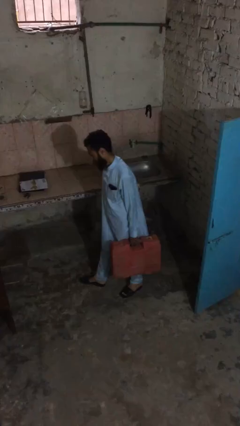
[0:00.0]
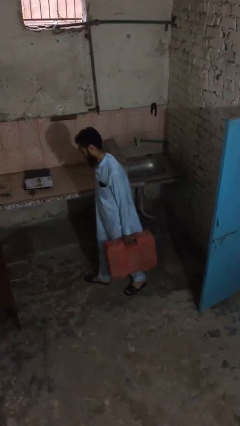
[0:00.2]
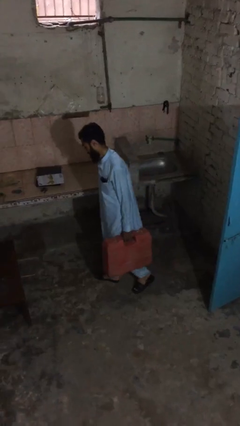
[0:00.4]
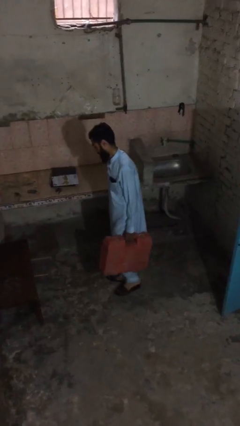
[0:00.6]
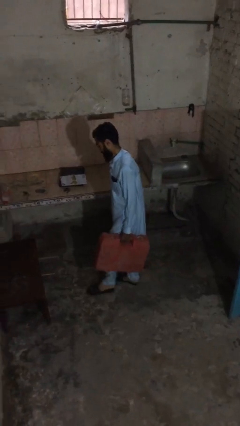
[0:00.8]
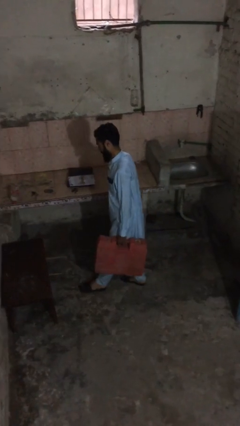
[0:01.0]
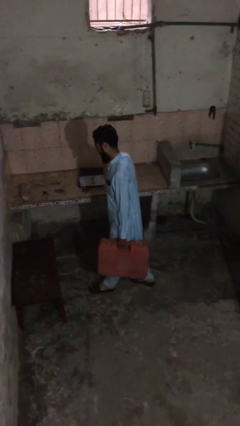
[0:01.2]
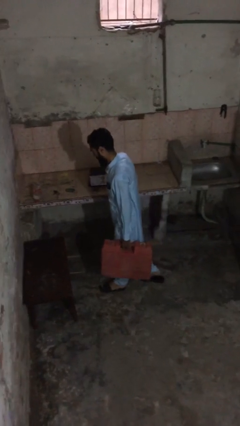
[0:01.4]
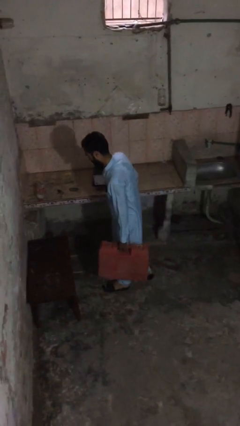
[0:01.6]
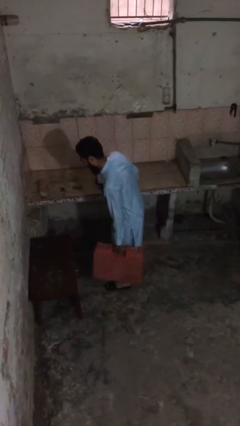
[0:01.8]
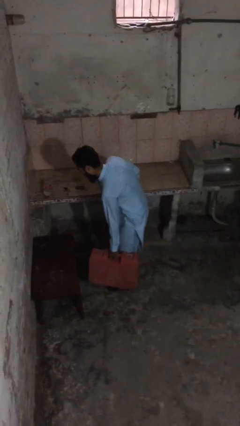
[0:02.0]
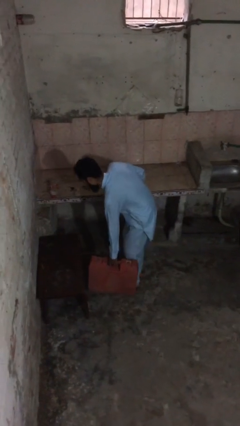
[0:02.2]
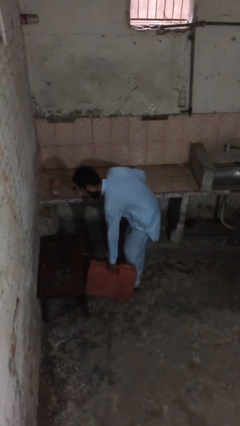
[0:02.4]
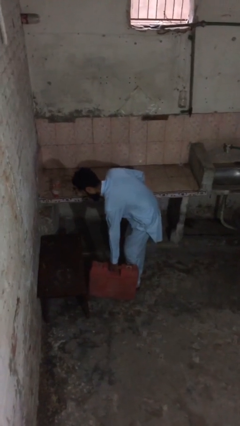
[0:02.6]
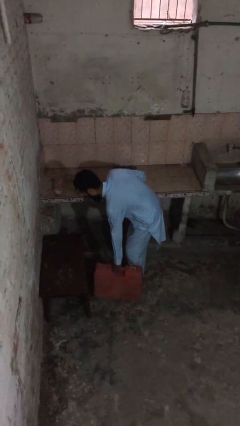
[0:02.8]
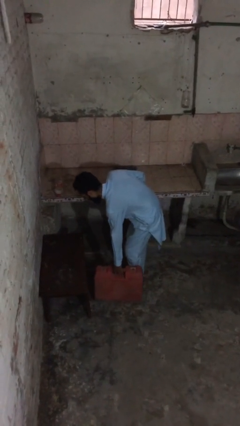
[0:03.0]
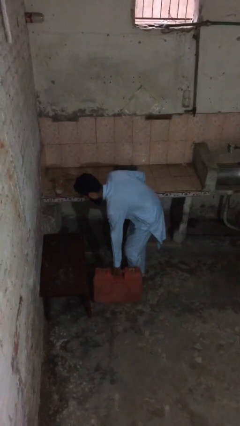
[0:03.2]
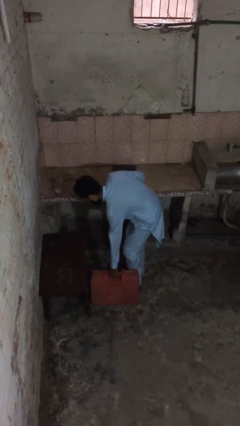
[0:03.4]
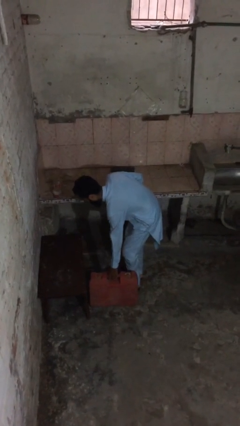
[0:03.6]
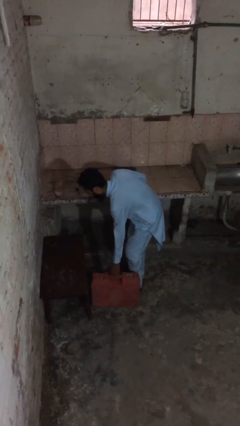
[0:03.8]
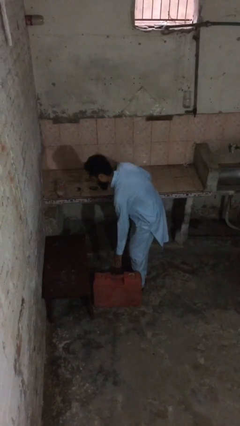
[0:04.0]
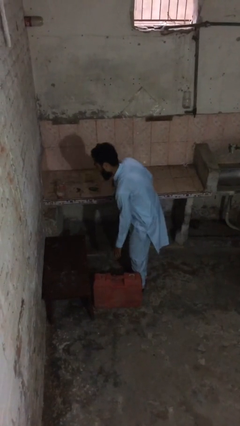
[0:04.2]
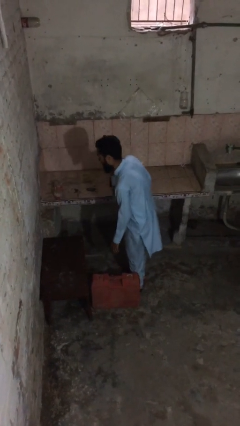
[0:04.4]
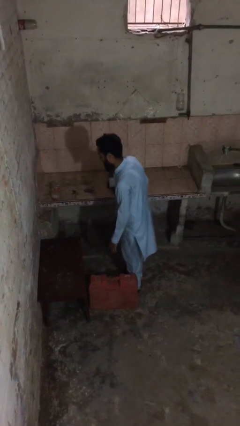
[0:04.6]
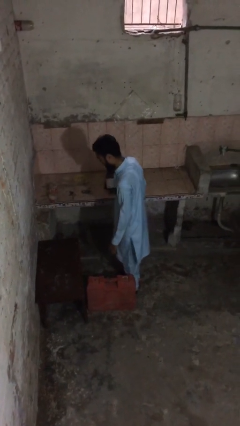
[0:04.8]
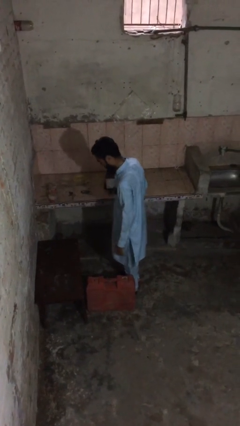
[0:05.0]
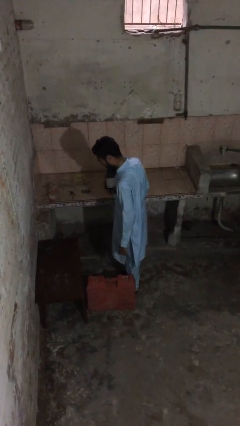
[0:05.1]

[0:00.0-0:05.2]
person puts down object on floor

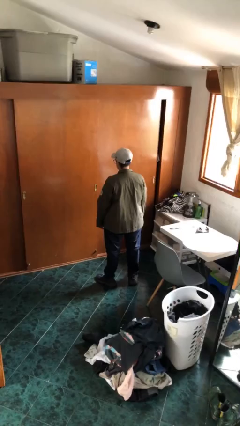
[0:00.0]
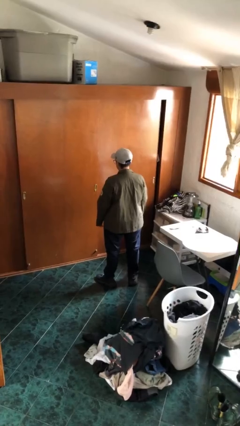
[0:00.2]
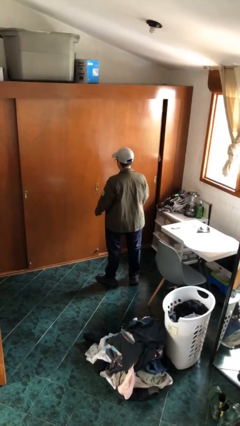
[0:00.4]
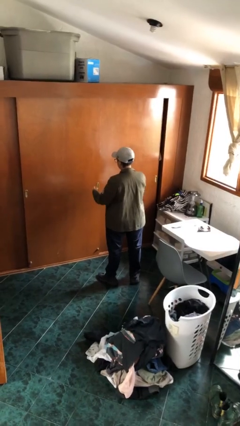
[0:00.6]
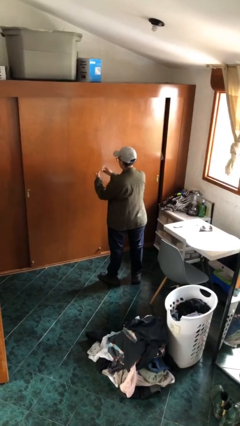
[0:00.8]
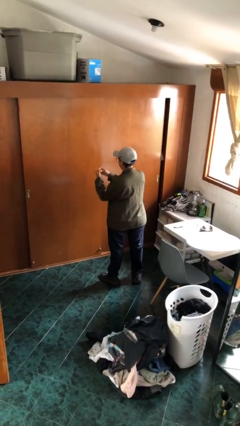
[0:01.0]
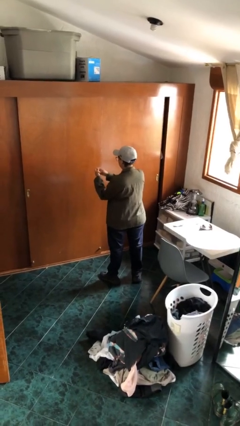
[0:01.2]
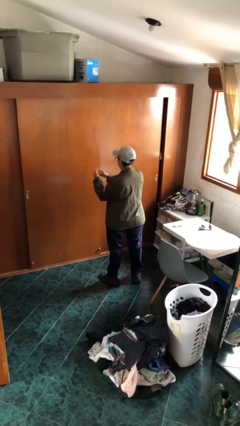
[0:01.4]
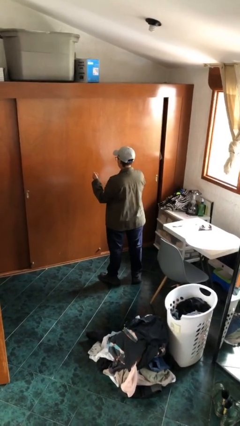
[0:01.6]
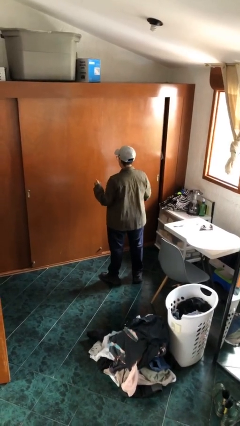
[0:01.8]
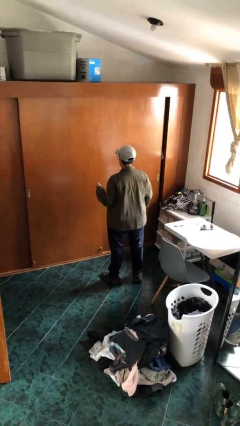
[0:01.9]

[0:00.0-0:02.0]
person puts on ring

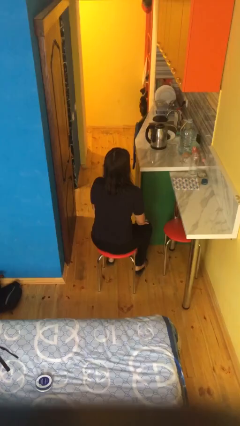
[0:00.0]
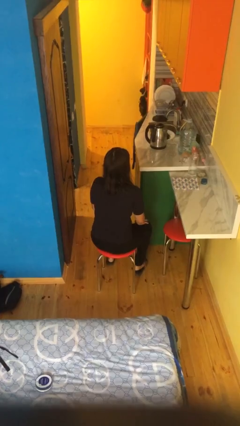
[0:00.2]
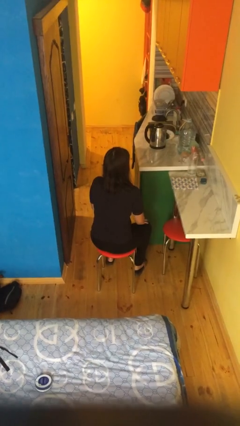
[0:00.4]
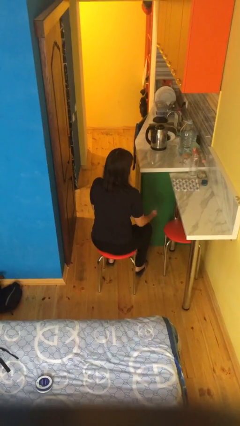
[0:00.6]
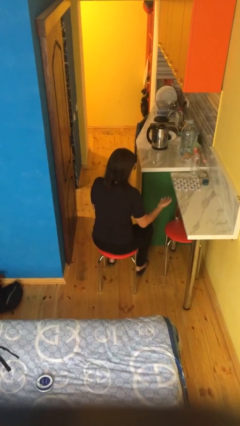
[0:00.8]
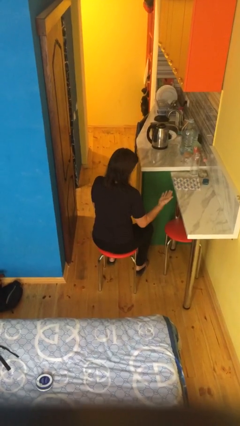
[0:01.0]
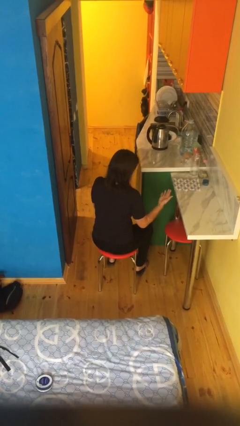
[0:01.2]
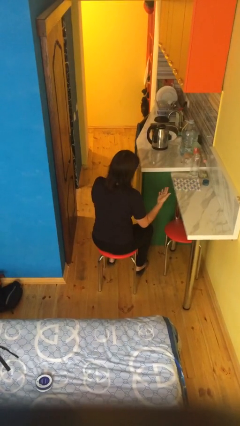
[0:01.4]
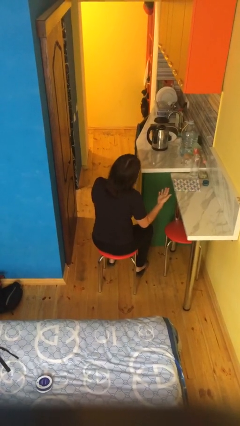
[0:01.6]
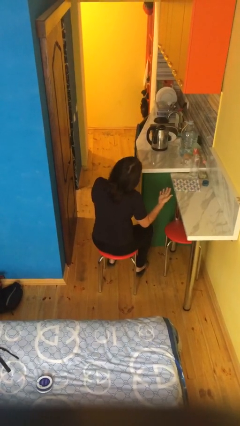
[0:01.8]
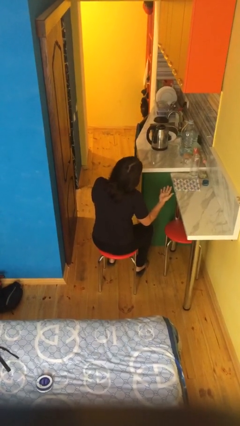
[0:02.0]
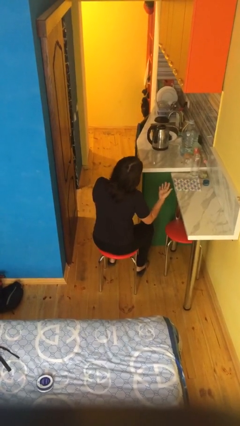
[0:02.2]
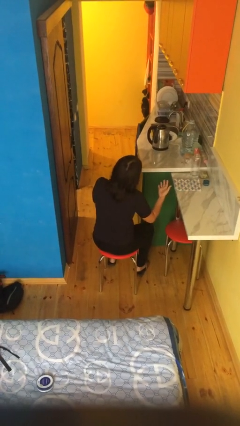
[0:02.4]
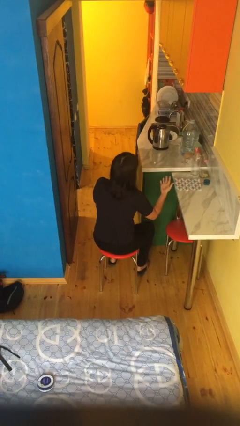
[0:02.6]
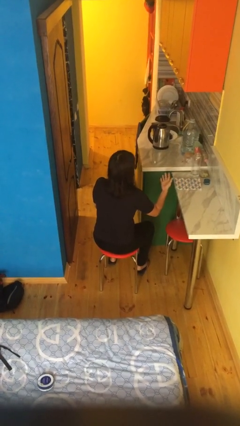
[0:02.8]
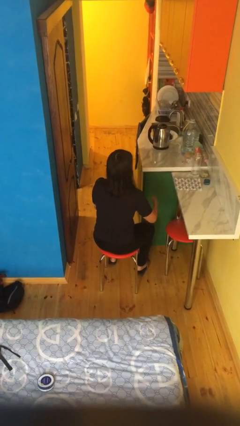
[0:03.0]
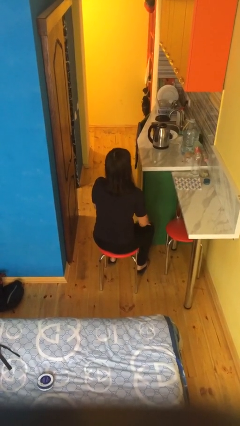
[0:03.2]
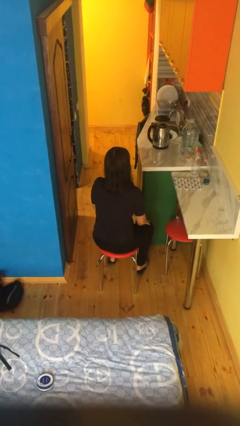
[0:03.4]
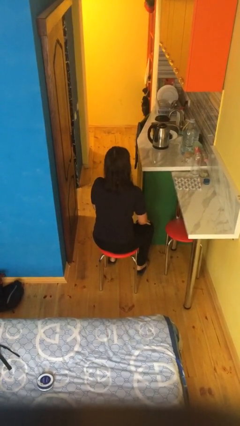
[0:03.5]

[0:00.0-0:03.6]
person looks at hands in lap

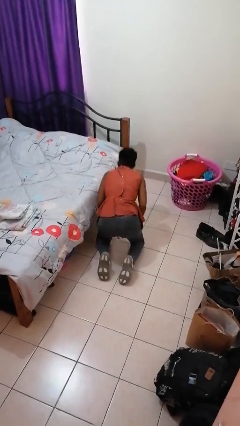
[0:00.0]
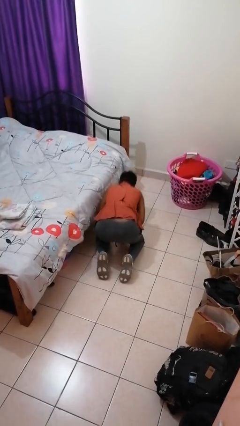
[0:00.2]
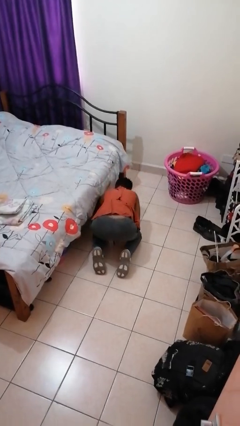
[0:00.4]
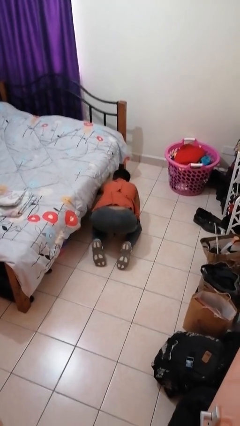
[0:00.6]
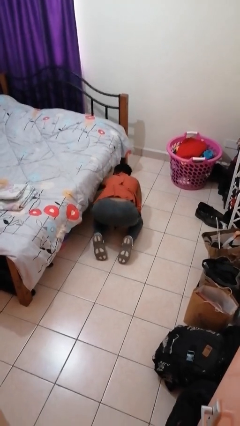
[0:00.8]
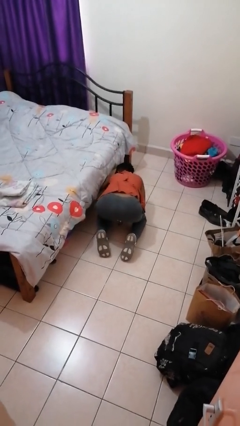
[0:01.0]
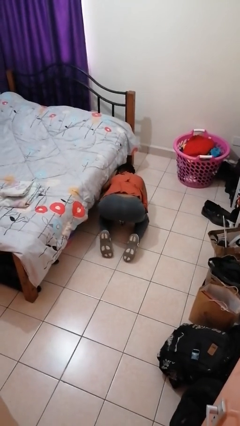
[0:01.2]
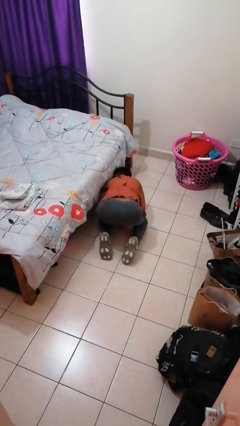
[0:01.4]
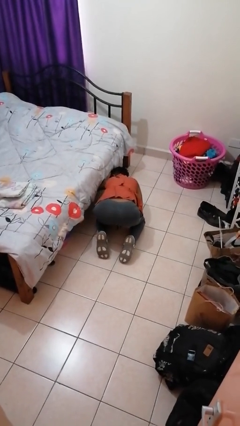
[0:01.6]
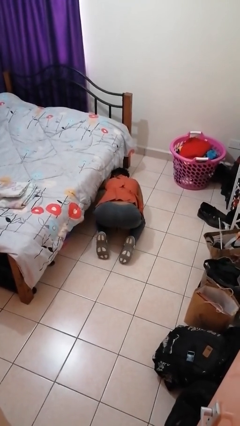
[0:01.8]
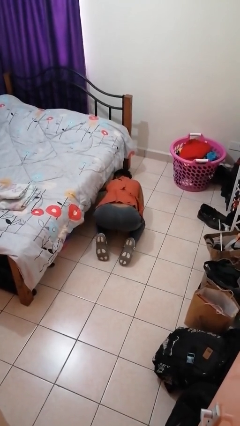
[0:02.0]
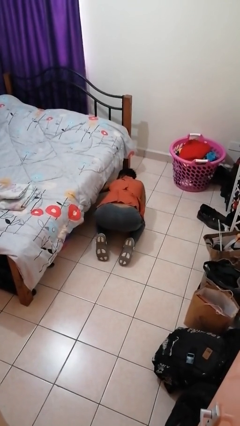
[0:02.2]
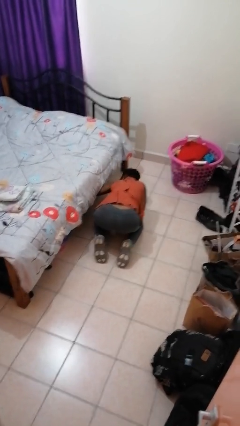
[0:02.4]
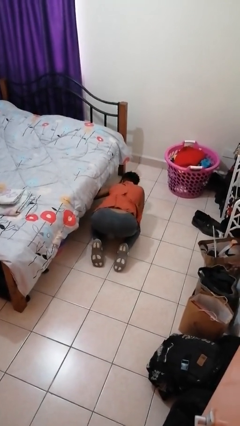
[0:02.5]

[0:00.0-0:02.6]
person searches under bed

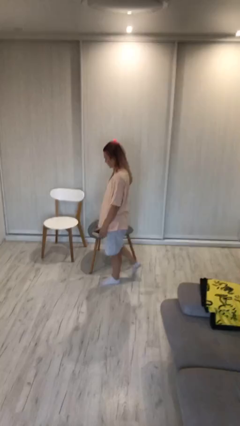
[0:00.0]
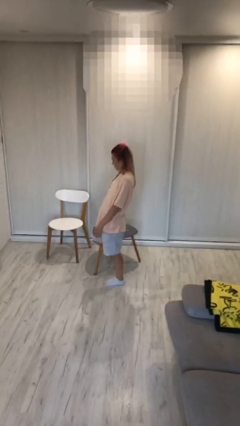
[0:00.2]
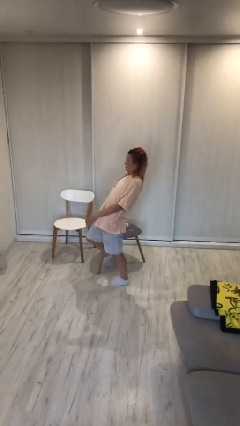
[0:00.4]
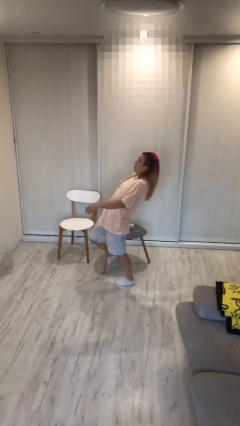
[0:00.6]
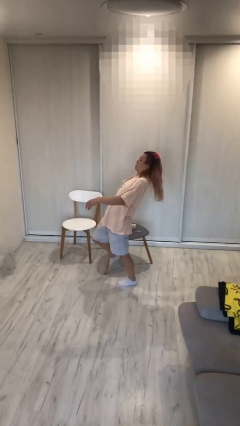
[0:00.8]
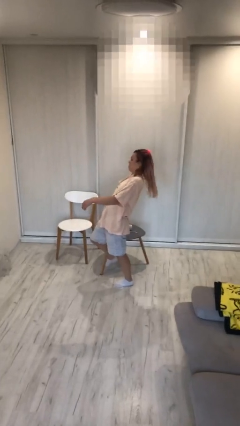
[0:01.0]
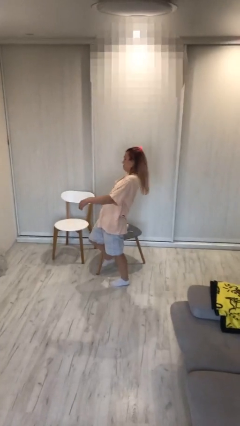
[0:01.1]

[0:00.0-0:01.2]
person bumps into table

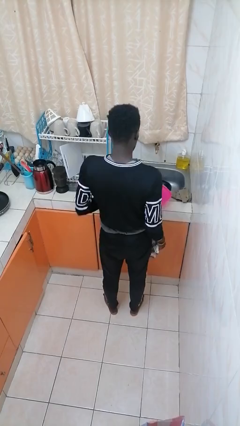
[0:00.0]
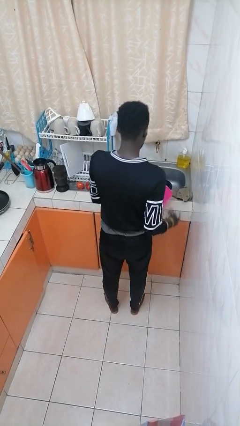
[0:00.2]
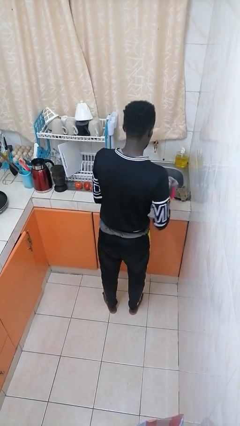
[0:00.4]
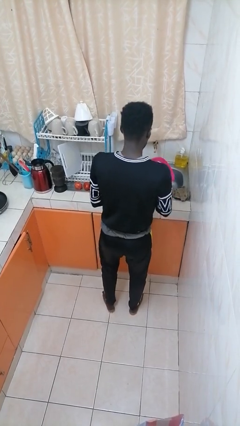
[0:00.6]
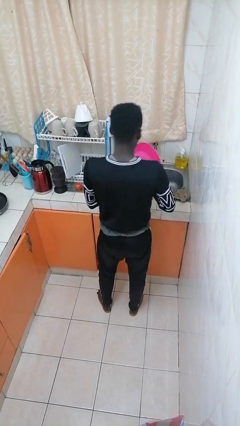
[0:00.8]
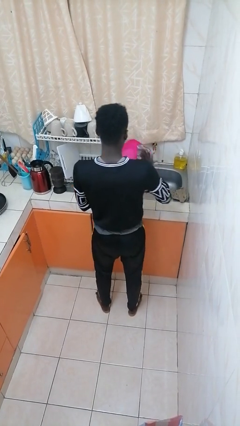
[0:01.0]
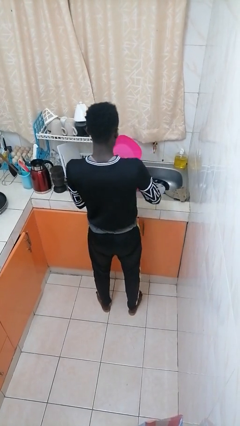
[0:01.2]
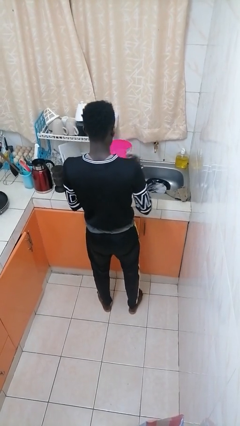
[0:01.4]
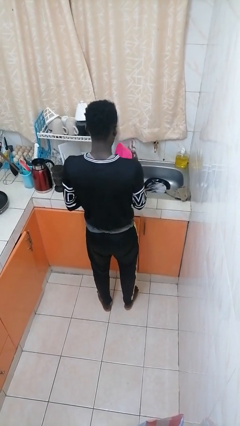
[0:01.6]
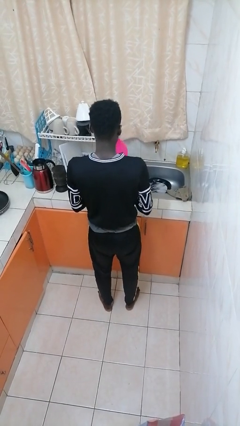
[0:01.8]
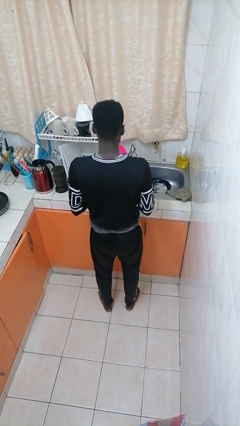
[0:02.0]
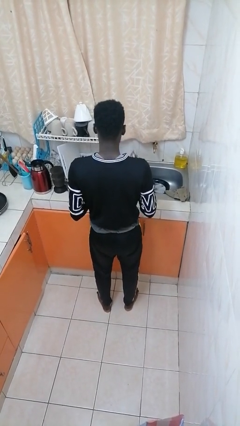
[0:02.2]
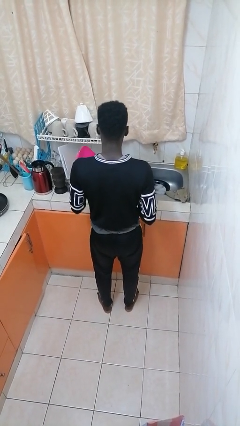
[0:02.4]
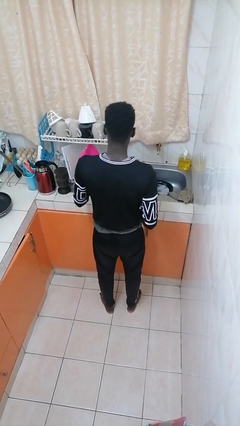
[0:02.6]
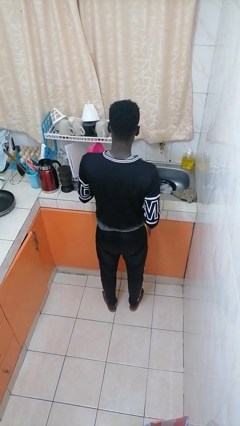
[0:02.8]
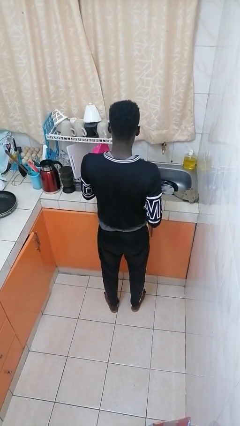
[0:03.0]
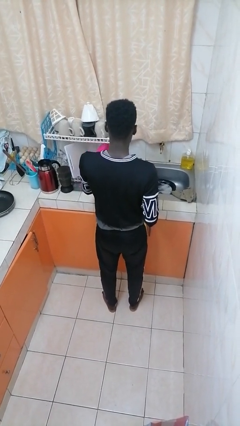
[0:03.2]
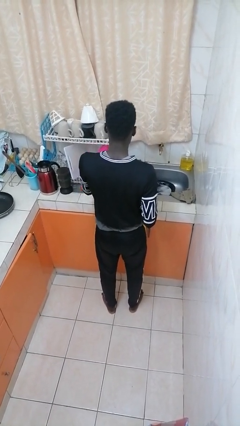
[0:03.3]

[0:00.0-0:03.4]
person dries dish
